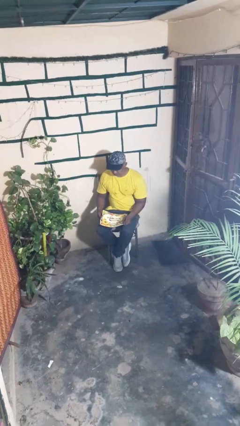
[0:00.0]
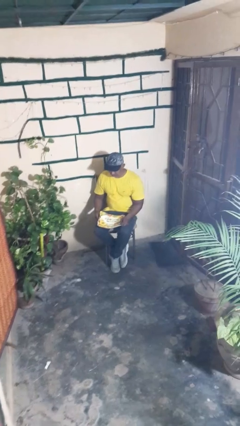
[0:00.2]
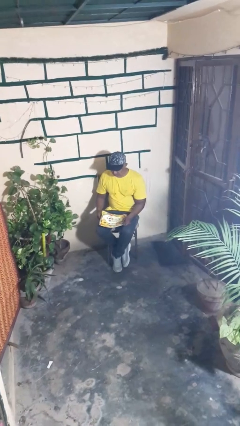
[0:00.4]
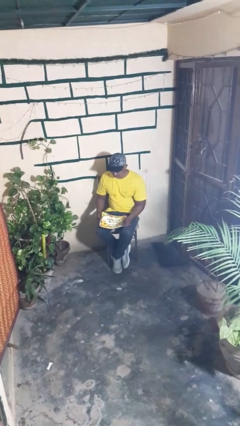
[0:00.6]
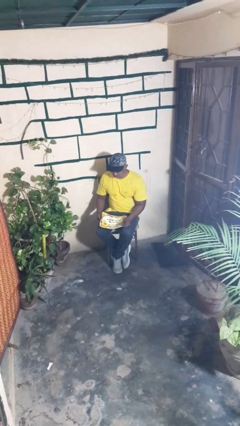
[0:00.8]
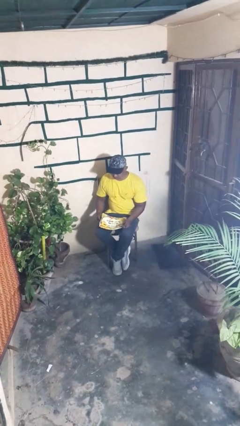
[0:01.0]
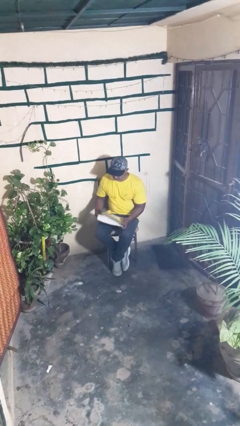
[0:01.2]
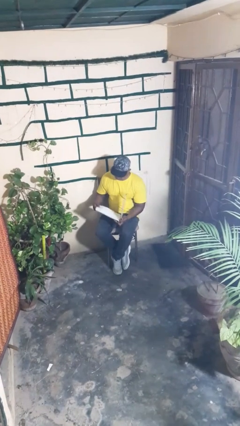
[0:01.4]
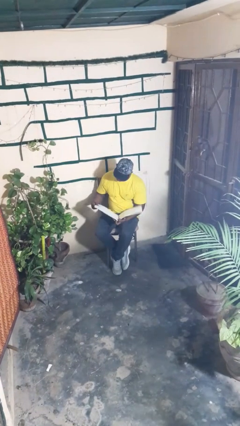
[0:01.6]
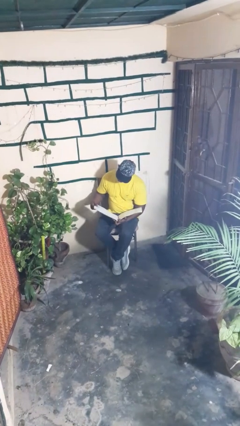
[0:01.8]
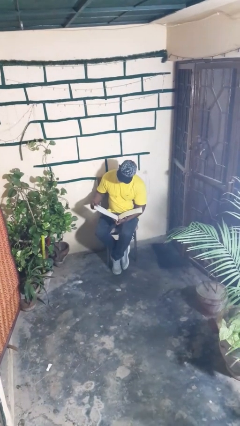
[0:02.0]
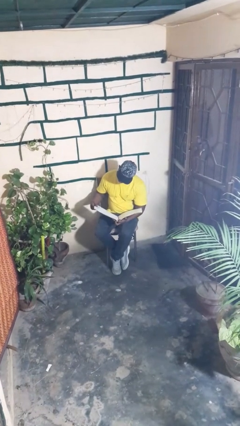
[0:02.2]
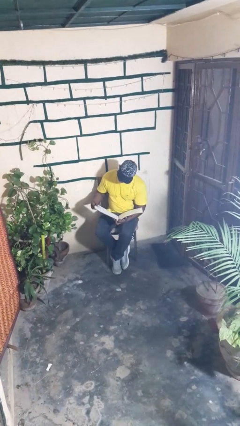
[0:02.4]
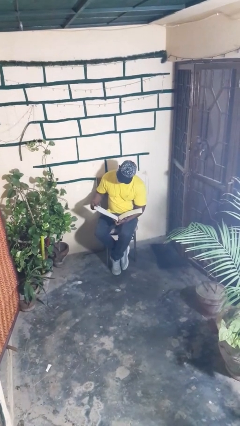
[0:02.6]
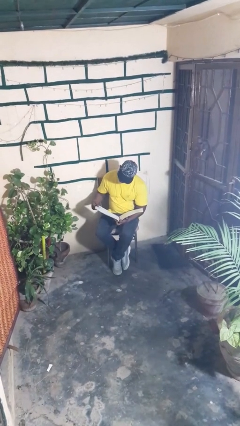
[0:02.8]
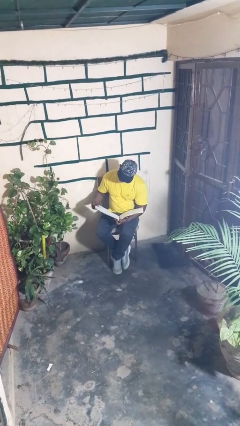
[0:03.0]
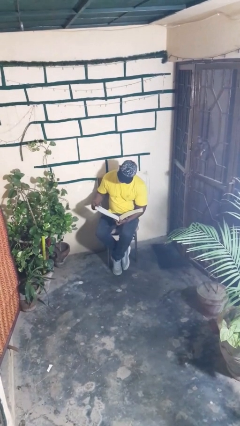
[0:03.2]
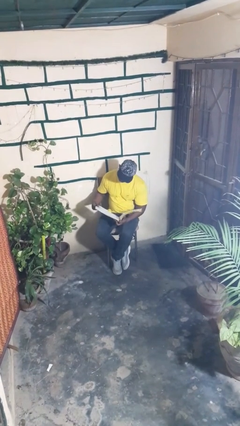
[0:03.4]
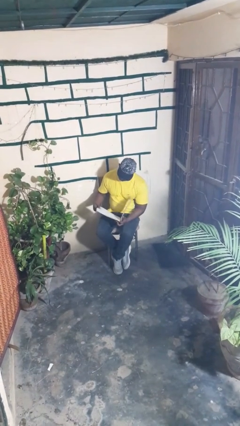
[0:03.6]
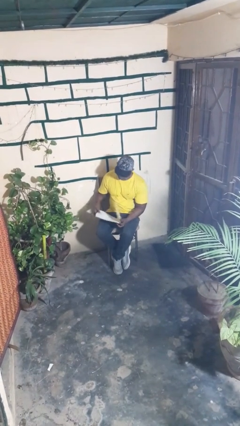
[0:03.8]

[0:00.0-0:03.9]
person reads magazine

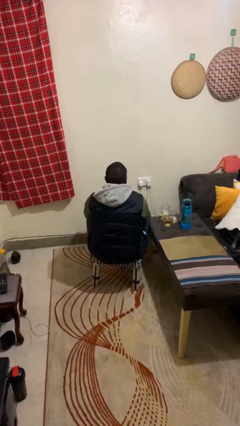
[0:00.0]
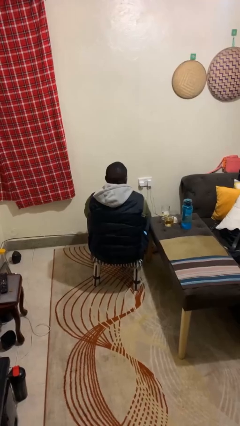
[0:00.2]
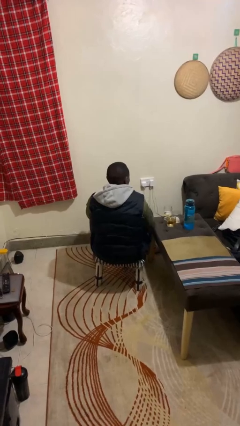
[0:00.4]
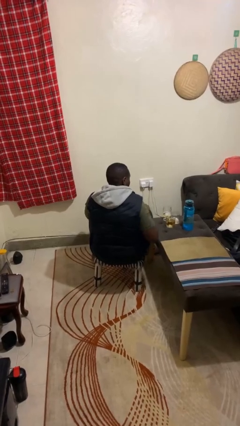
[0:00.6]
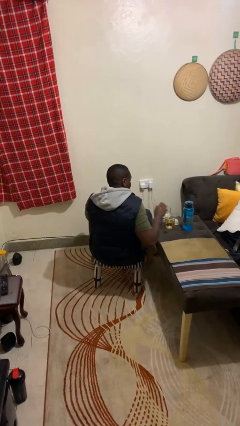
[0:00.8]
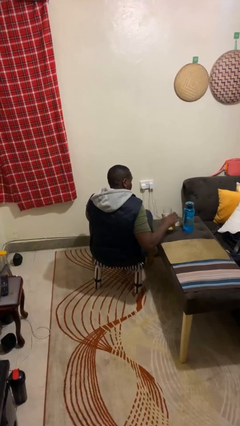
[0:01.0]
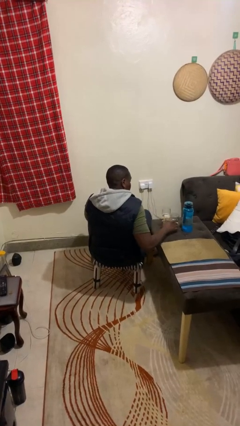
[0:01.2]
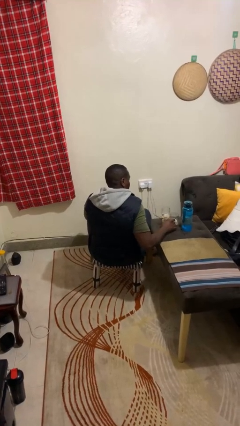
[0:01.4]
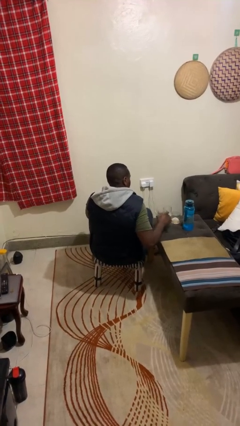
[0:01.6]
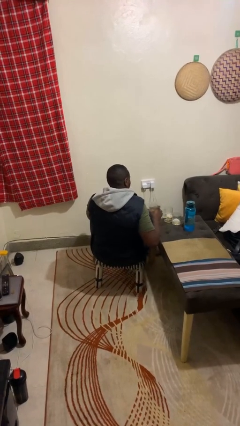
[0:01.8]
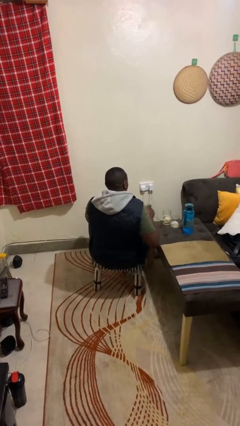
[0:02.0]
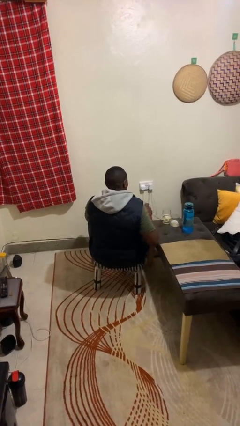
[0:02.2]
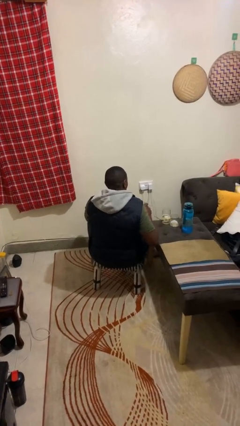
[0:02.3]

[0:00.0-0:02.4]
person picks up object from table

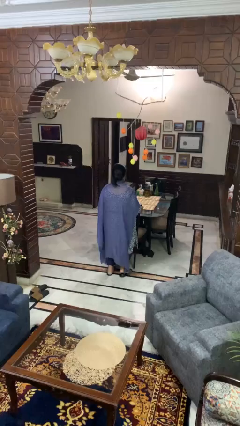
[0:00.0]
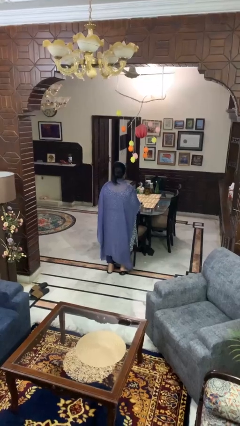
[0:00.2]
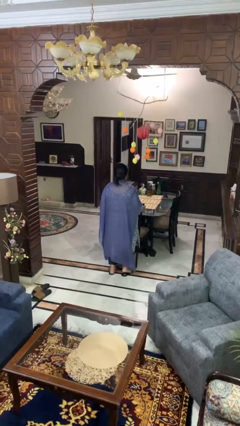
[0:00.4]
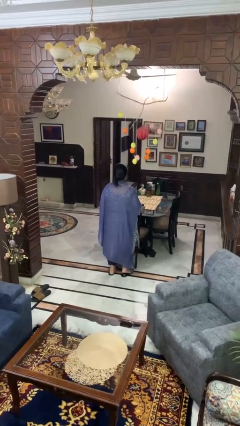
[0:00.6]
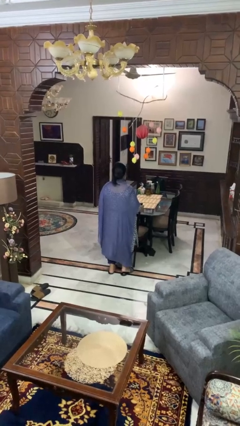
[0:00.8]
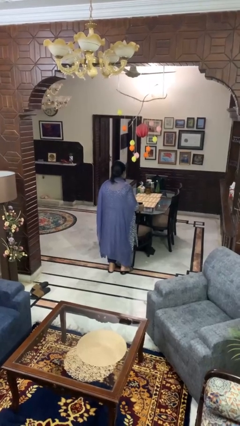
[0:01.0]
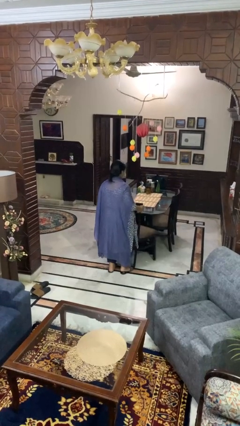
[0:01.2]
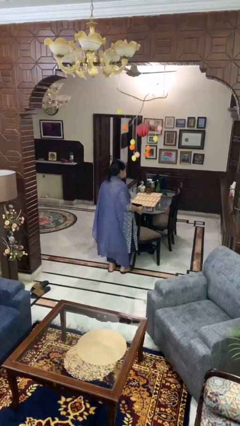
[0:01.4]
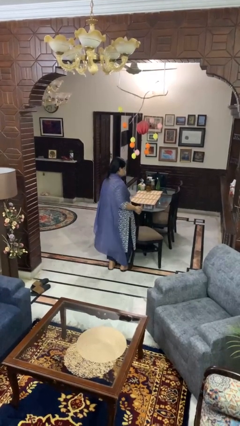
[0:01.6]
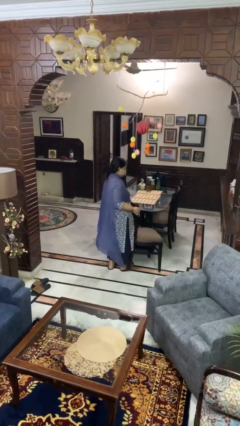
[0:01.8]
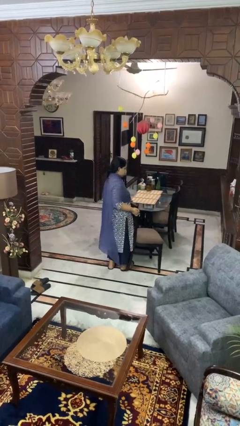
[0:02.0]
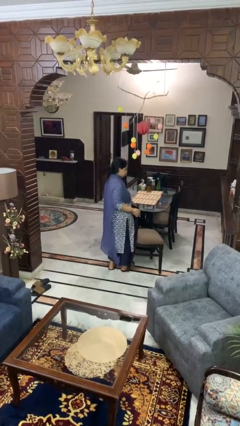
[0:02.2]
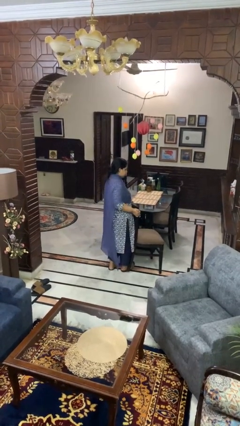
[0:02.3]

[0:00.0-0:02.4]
person pulls out chair

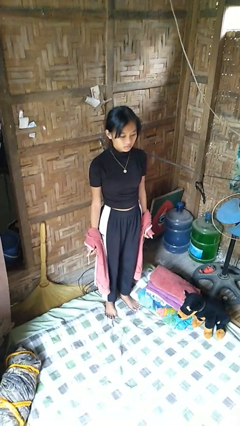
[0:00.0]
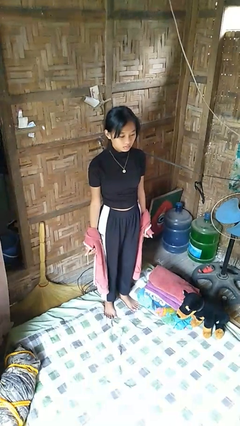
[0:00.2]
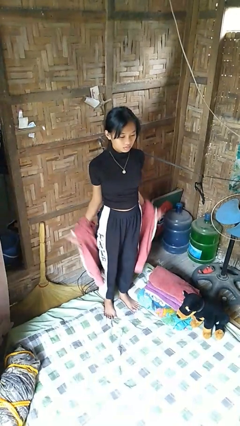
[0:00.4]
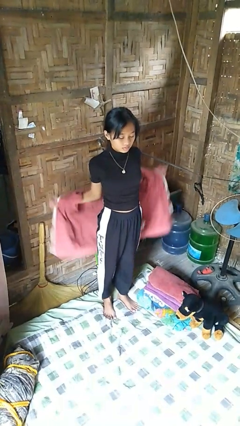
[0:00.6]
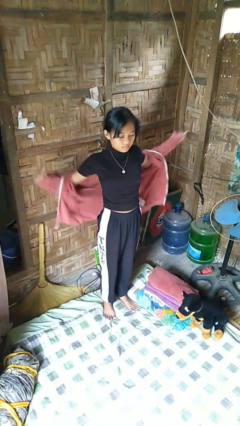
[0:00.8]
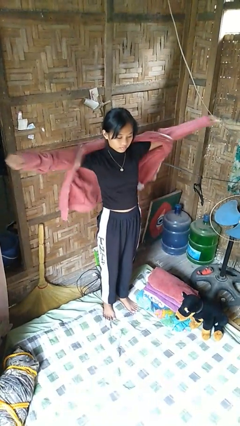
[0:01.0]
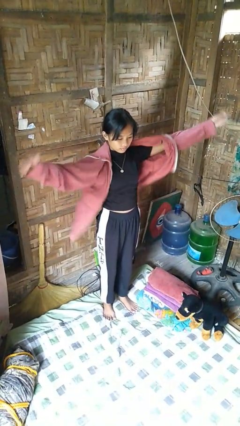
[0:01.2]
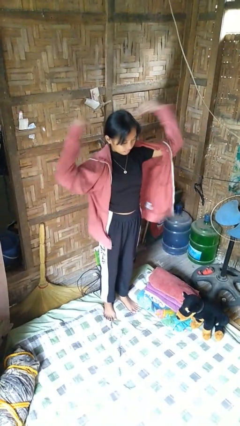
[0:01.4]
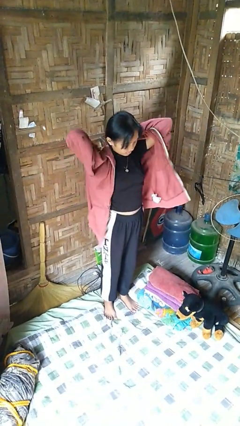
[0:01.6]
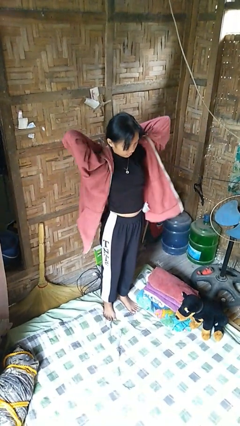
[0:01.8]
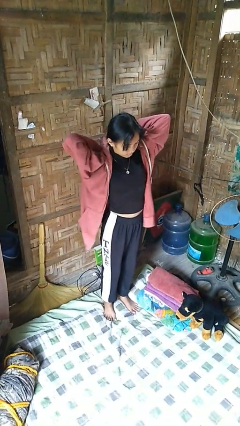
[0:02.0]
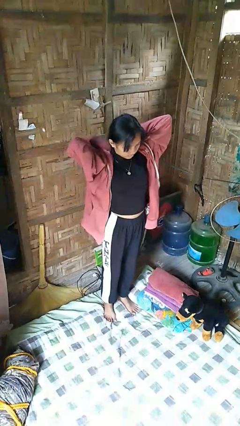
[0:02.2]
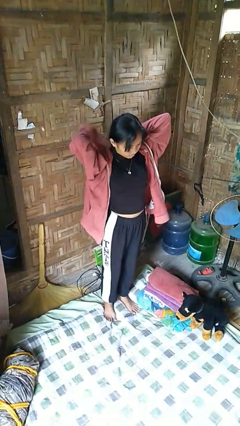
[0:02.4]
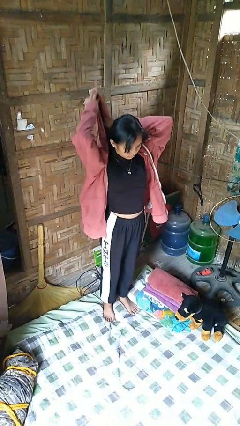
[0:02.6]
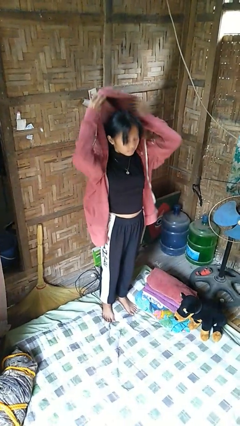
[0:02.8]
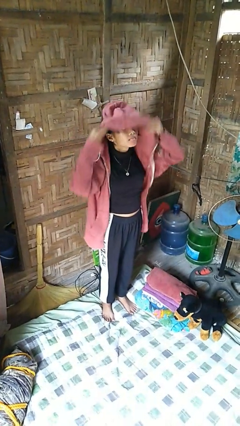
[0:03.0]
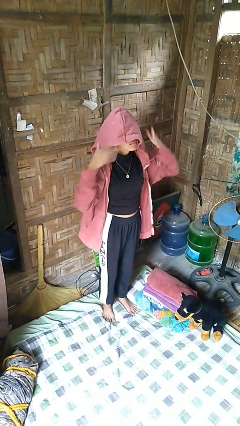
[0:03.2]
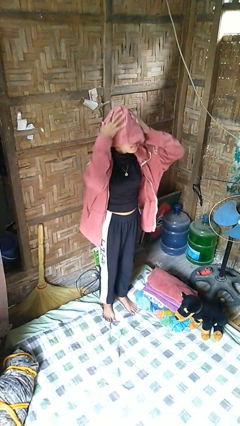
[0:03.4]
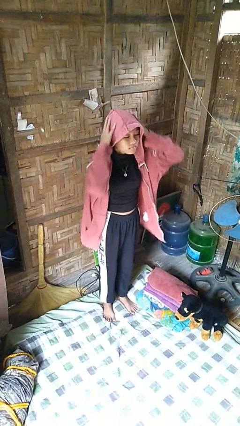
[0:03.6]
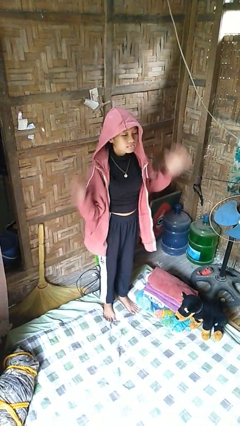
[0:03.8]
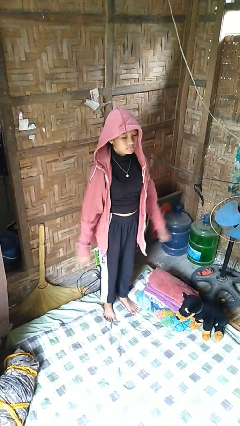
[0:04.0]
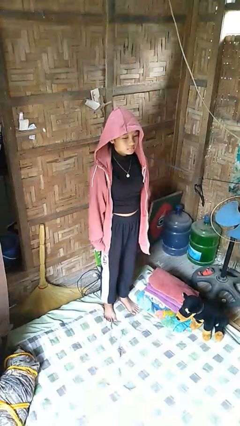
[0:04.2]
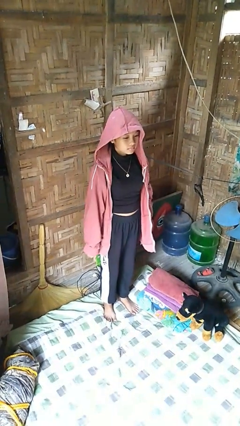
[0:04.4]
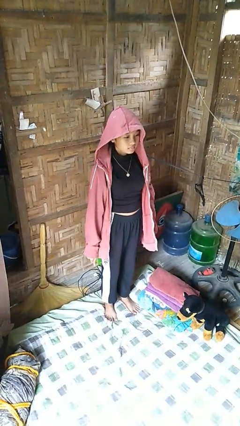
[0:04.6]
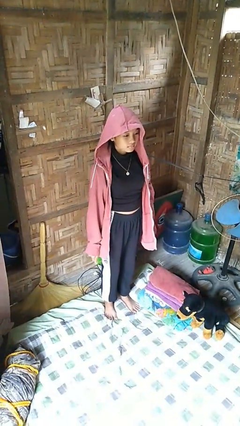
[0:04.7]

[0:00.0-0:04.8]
person puts on hoodie

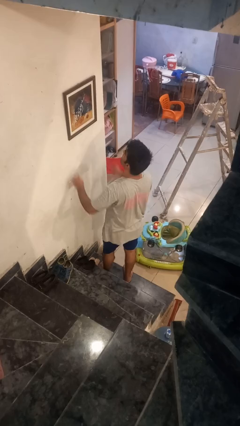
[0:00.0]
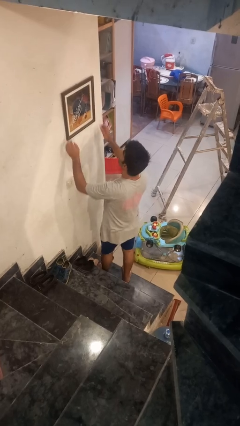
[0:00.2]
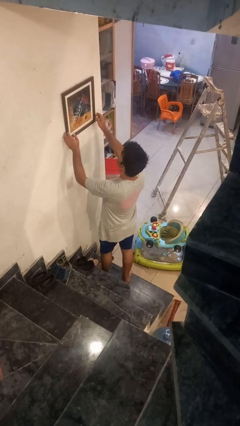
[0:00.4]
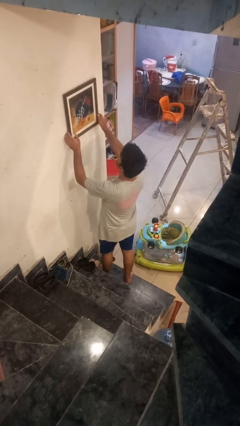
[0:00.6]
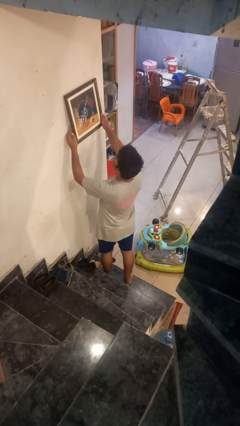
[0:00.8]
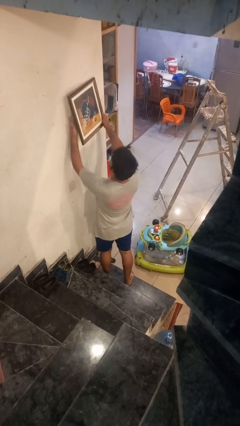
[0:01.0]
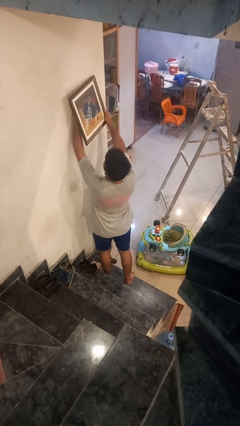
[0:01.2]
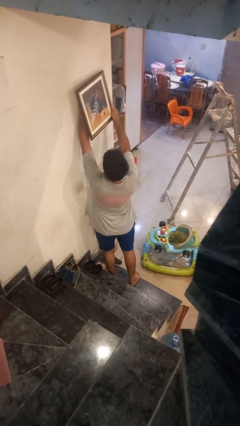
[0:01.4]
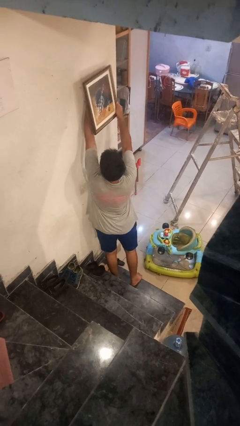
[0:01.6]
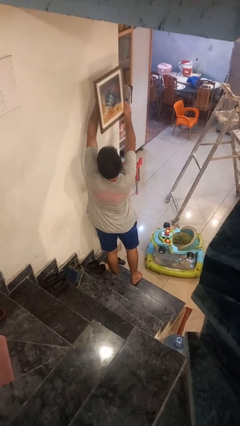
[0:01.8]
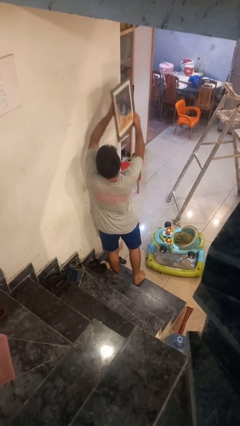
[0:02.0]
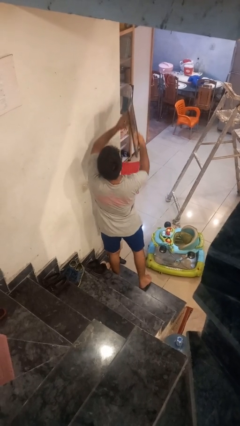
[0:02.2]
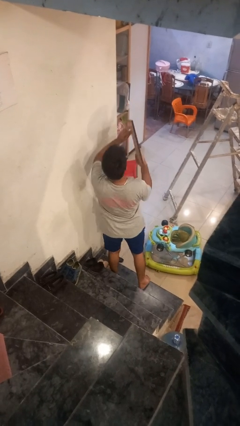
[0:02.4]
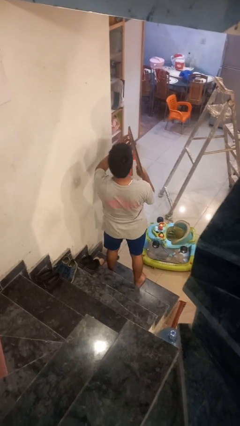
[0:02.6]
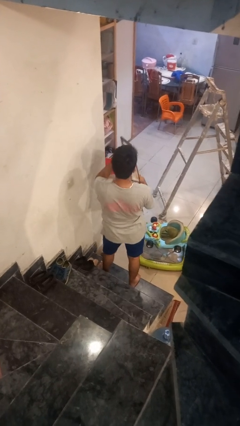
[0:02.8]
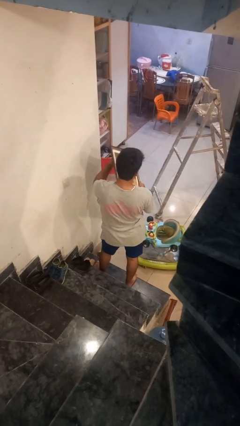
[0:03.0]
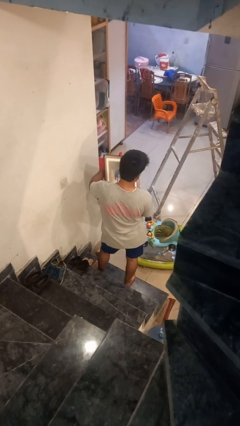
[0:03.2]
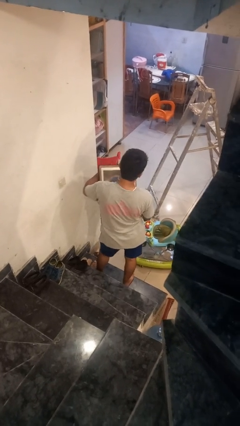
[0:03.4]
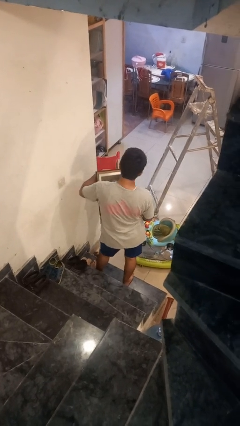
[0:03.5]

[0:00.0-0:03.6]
person takes down picture frame

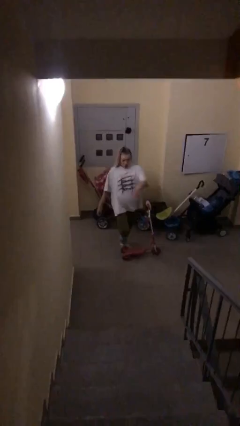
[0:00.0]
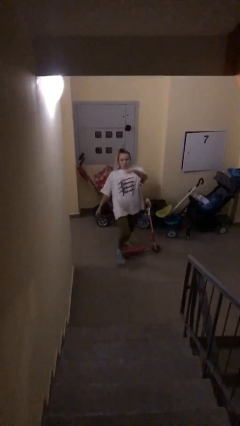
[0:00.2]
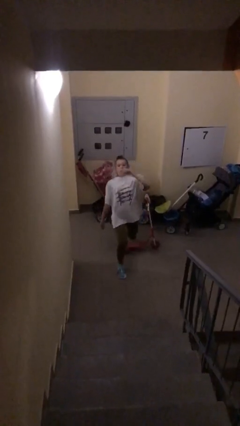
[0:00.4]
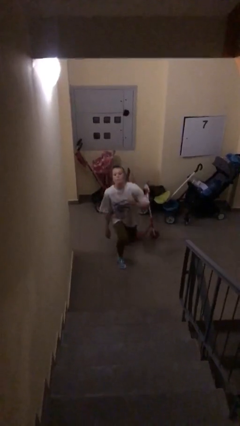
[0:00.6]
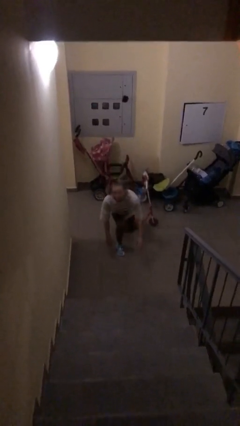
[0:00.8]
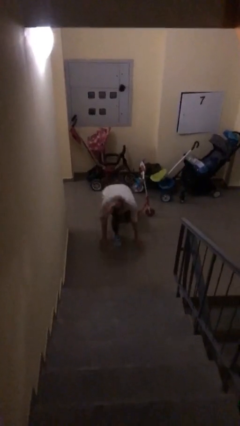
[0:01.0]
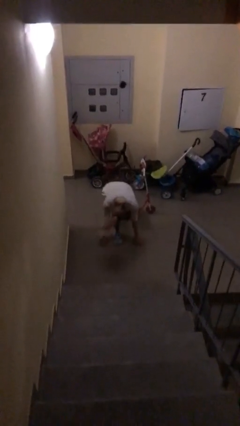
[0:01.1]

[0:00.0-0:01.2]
person trips on object on floor
